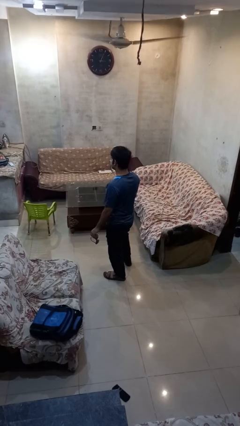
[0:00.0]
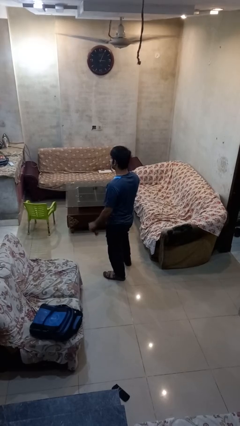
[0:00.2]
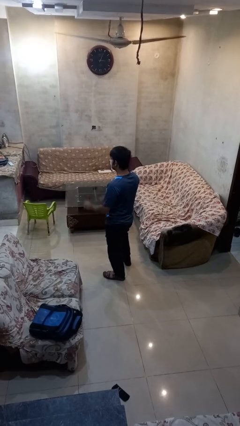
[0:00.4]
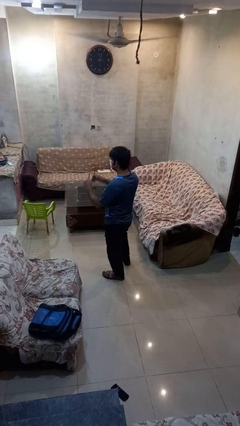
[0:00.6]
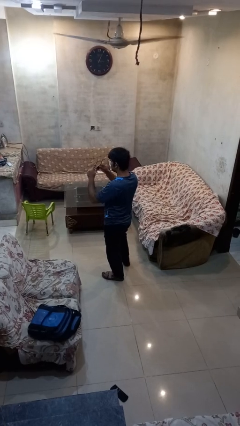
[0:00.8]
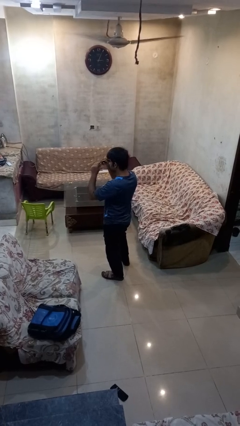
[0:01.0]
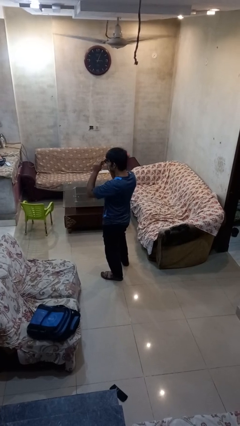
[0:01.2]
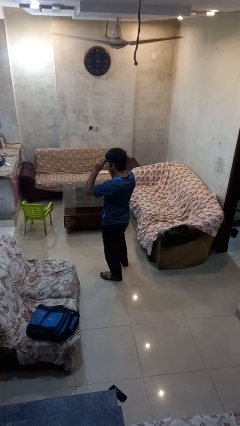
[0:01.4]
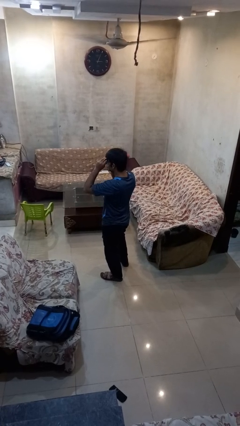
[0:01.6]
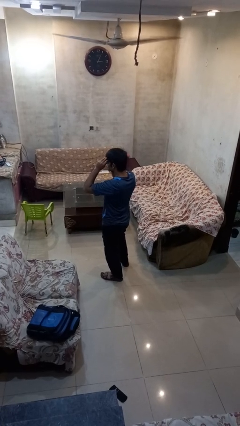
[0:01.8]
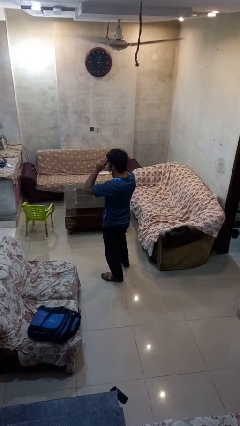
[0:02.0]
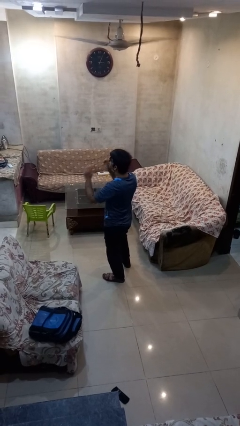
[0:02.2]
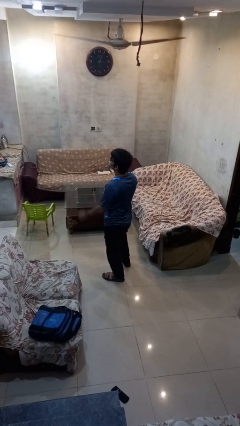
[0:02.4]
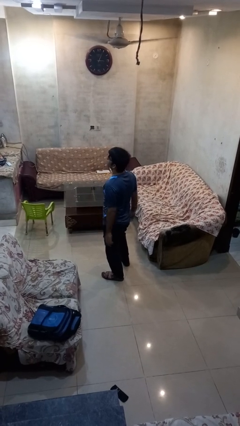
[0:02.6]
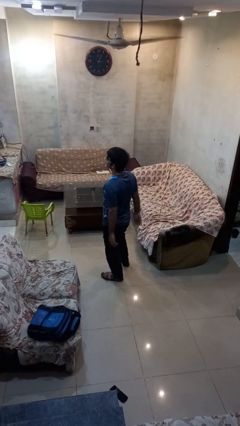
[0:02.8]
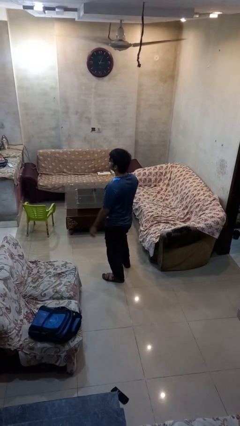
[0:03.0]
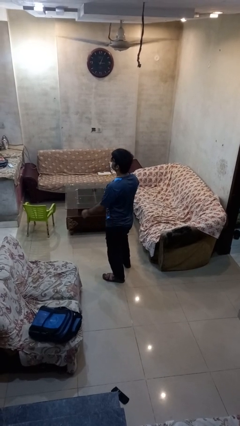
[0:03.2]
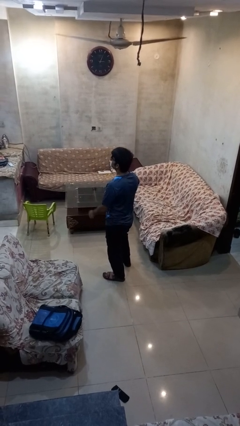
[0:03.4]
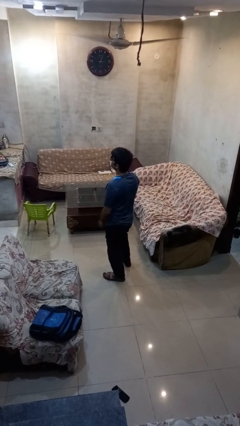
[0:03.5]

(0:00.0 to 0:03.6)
person puts on sunglasses

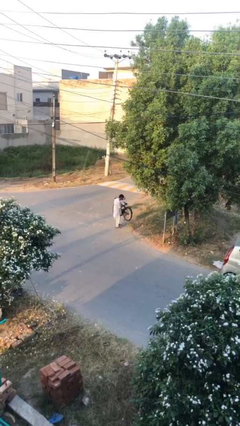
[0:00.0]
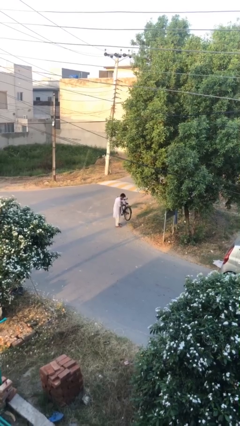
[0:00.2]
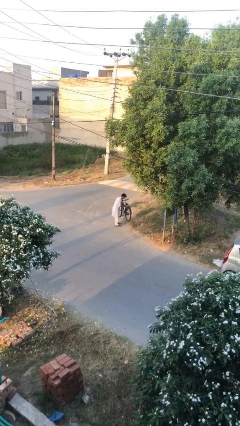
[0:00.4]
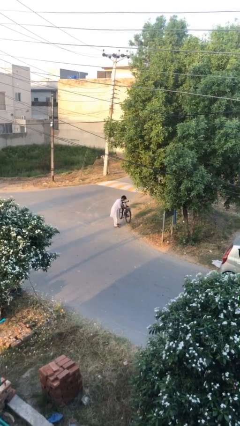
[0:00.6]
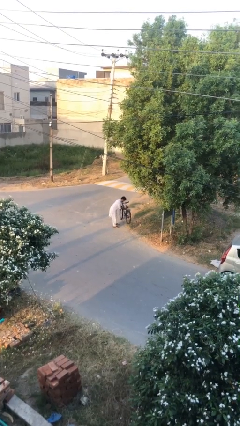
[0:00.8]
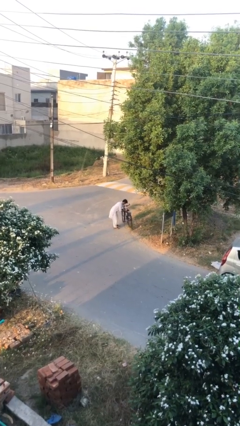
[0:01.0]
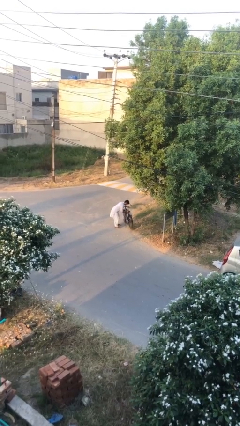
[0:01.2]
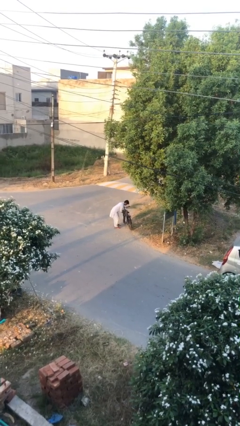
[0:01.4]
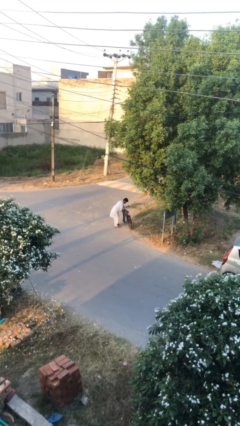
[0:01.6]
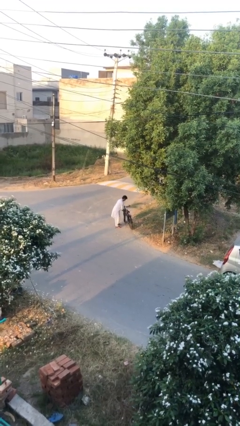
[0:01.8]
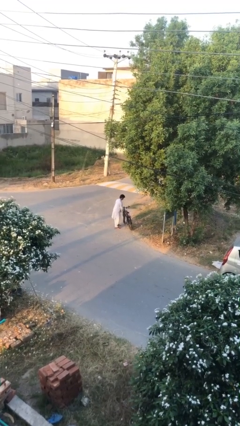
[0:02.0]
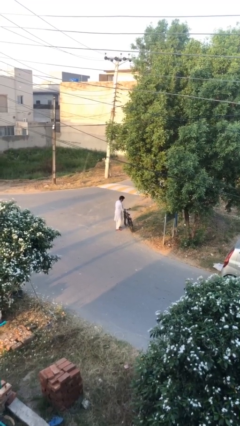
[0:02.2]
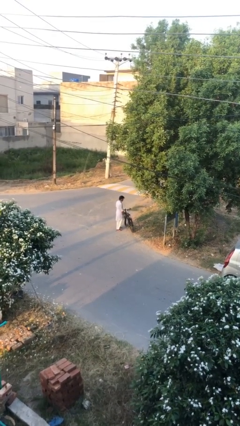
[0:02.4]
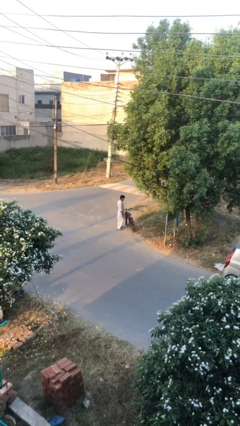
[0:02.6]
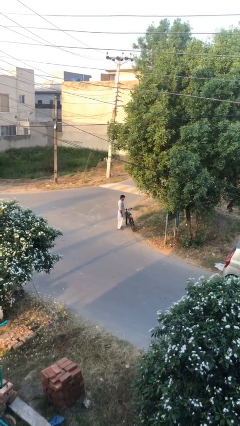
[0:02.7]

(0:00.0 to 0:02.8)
person puts down object on floor

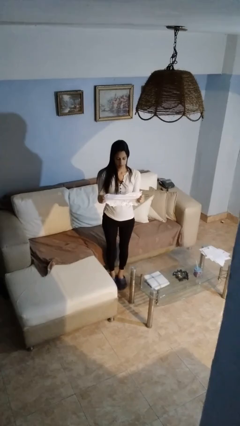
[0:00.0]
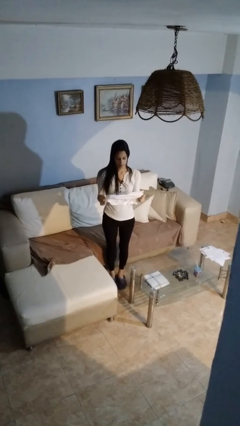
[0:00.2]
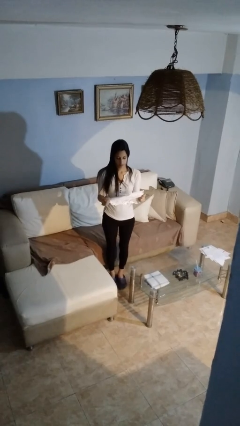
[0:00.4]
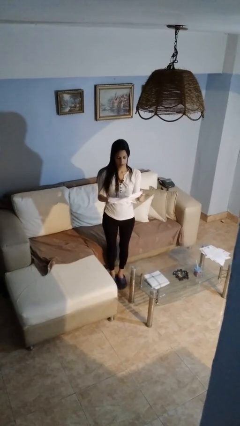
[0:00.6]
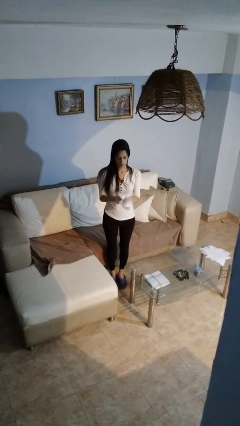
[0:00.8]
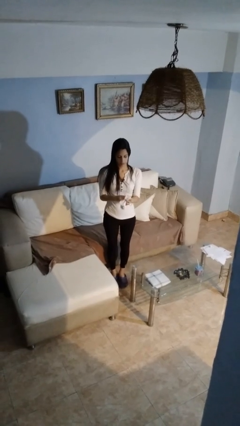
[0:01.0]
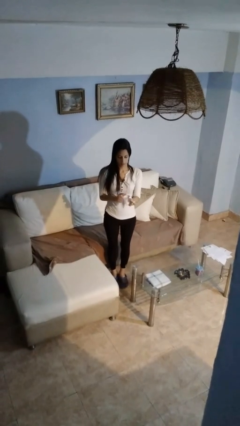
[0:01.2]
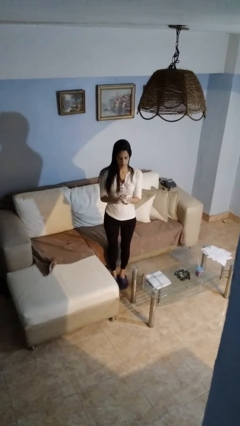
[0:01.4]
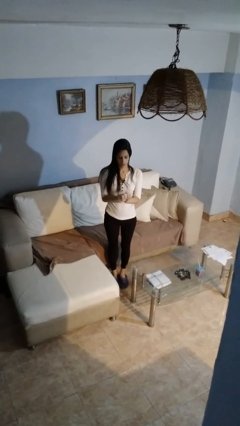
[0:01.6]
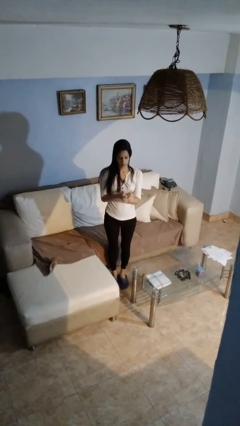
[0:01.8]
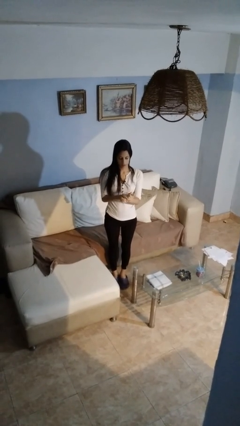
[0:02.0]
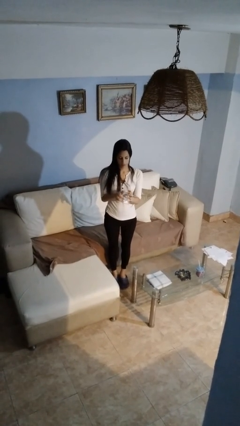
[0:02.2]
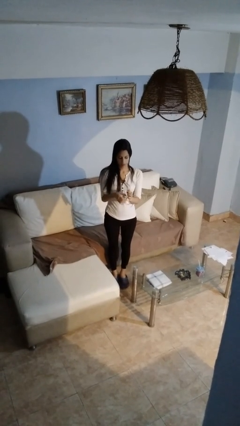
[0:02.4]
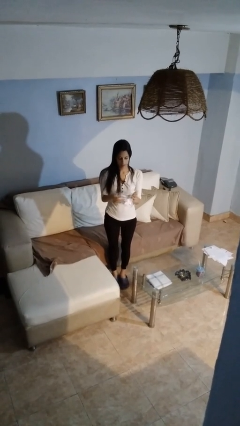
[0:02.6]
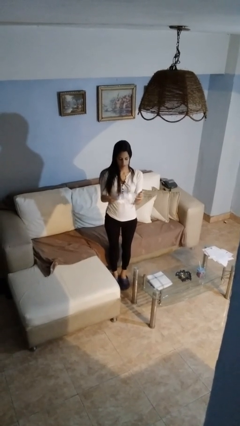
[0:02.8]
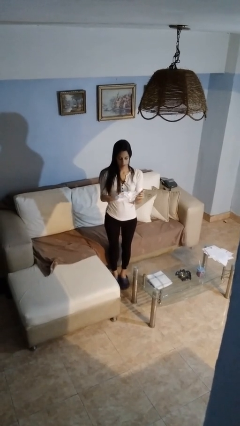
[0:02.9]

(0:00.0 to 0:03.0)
person crumples paper

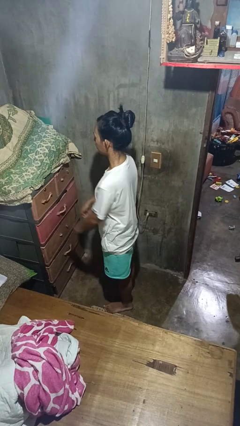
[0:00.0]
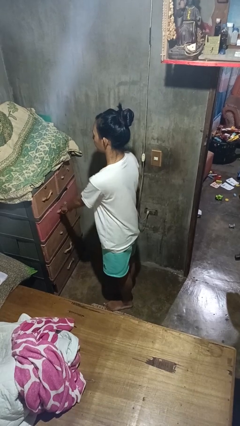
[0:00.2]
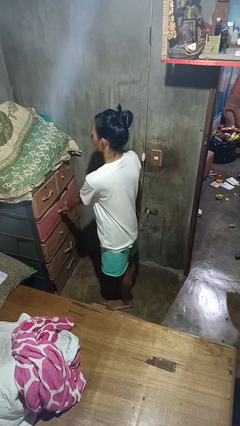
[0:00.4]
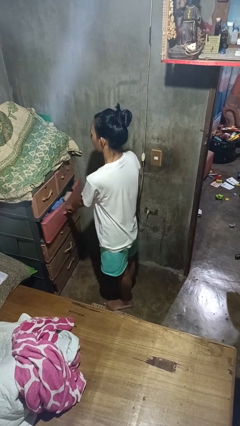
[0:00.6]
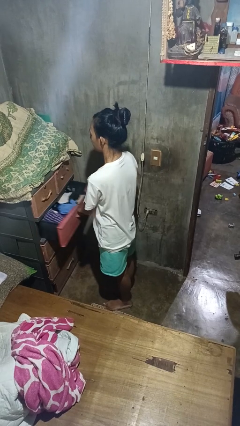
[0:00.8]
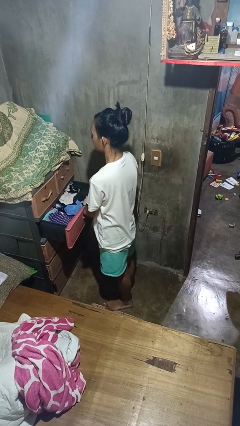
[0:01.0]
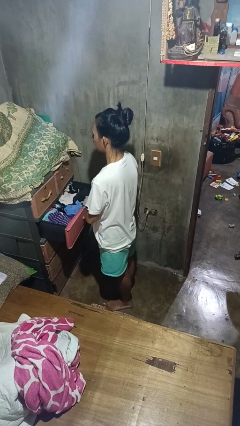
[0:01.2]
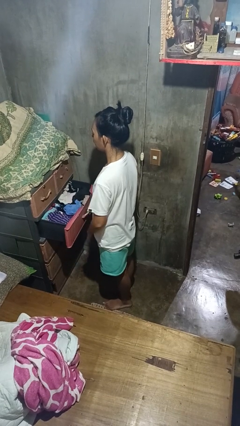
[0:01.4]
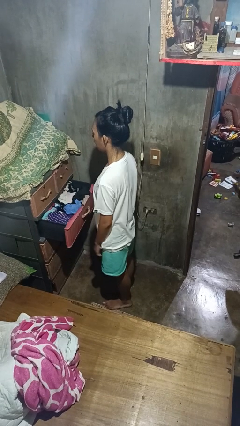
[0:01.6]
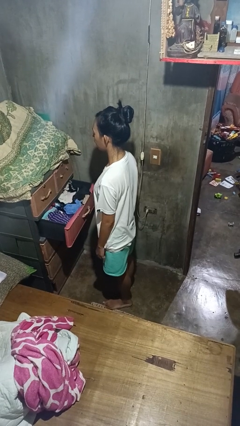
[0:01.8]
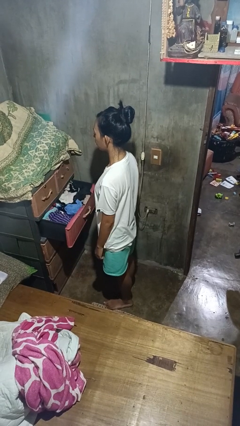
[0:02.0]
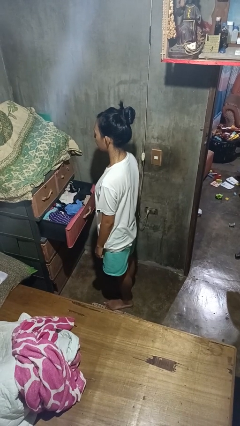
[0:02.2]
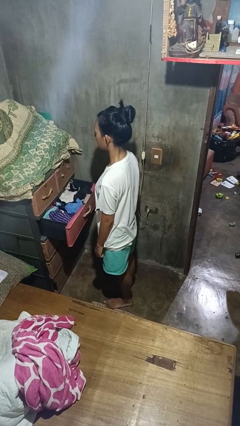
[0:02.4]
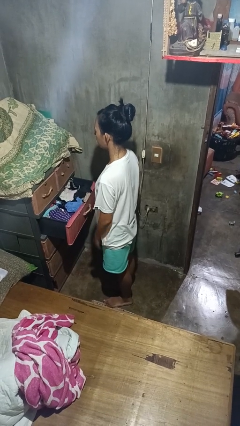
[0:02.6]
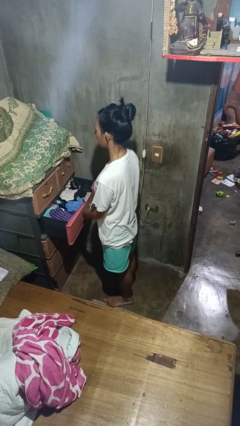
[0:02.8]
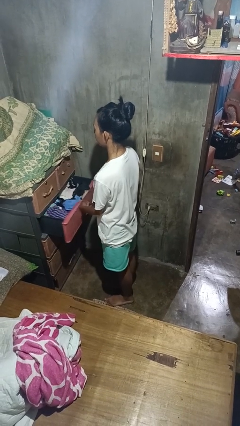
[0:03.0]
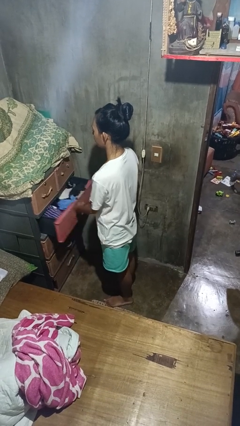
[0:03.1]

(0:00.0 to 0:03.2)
person opens dresser drawer

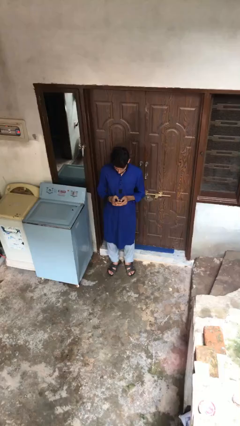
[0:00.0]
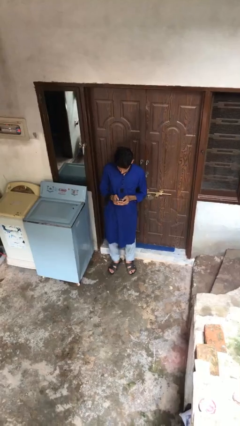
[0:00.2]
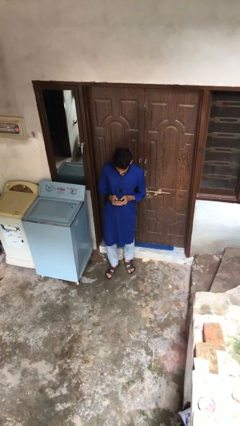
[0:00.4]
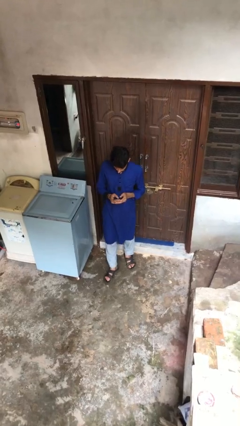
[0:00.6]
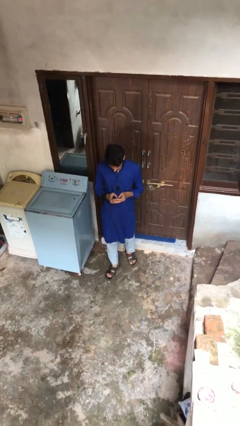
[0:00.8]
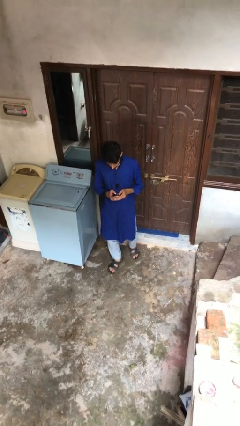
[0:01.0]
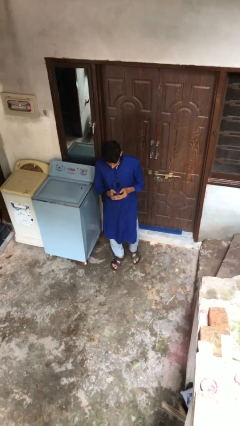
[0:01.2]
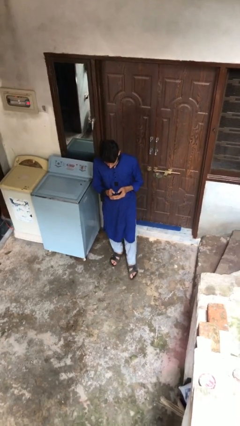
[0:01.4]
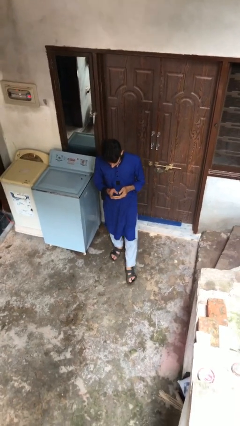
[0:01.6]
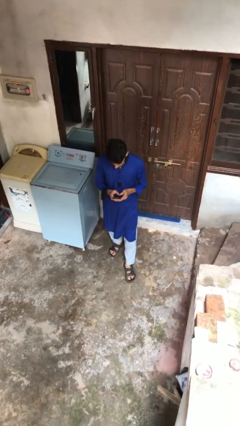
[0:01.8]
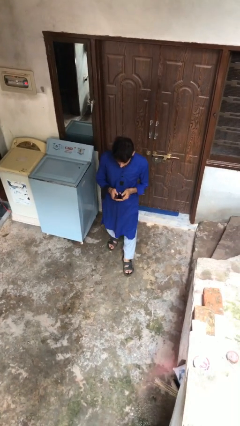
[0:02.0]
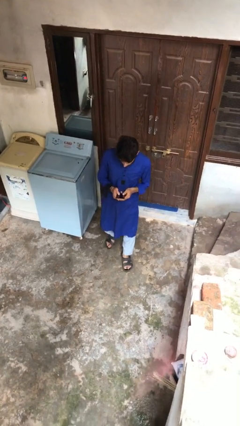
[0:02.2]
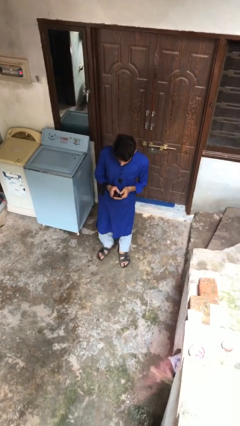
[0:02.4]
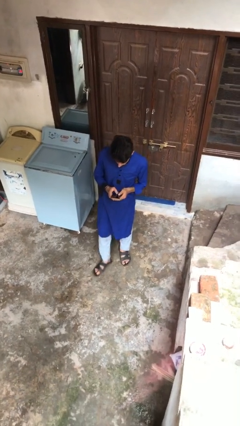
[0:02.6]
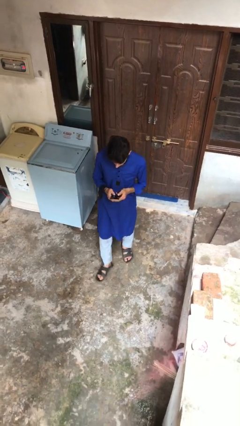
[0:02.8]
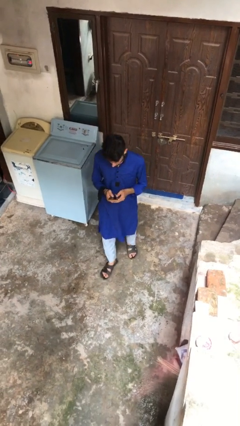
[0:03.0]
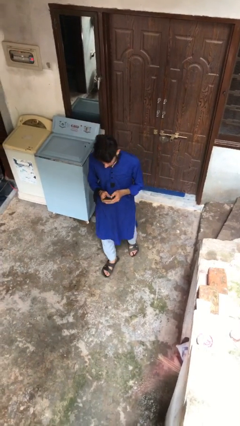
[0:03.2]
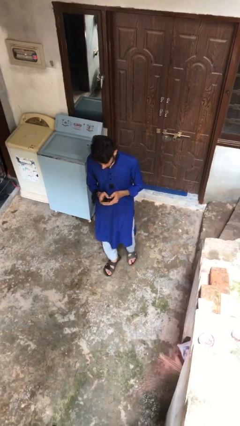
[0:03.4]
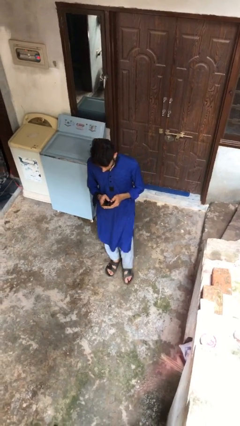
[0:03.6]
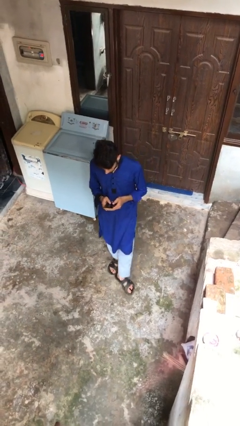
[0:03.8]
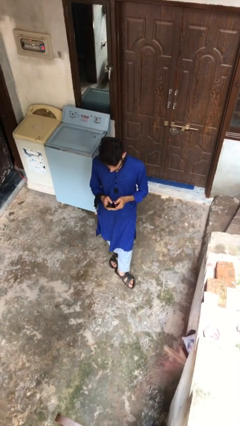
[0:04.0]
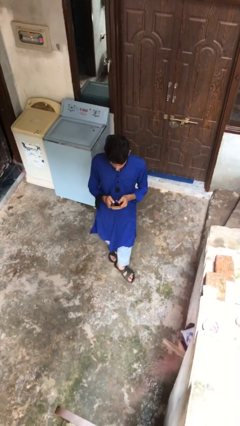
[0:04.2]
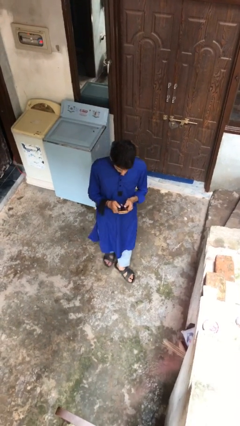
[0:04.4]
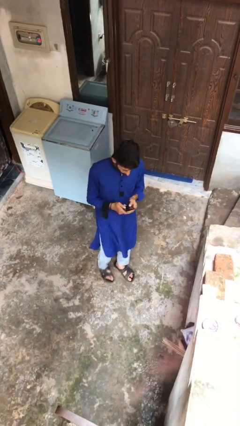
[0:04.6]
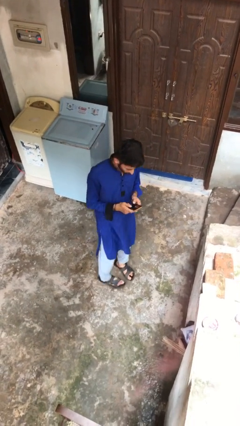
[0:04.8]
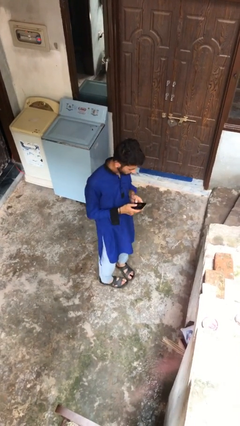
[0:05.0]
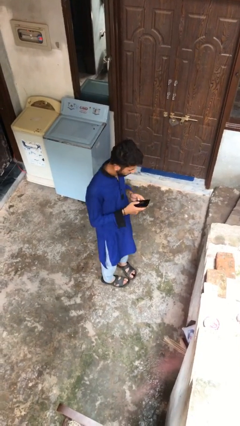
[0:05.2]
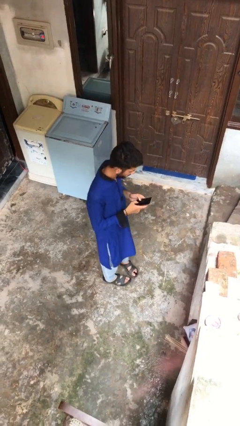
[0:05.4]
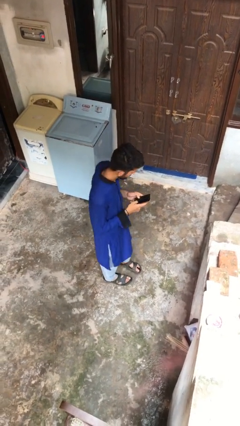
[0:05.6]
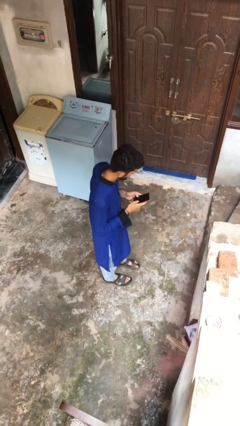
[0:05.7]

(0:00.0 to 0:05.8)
person texts on phone
